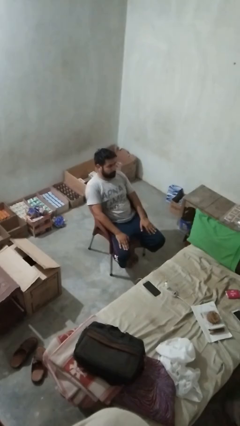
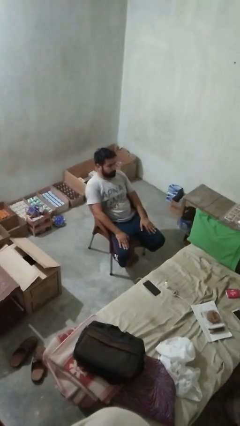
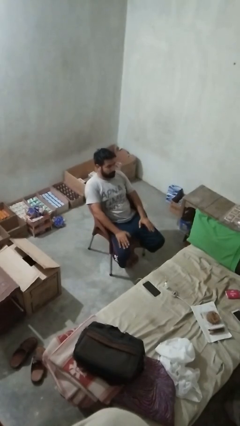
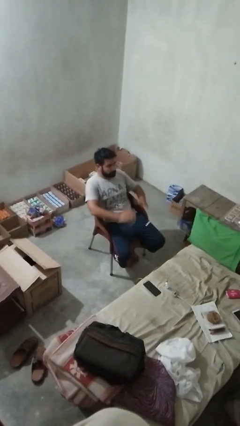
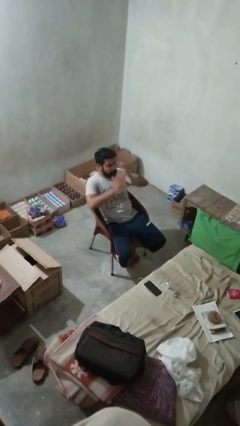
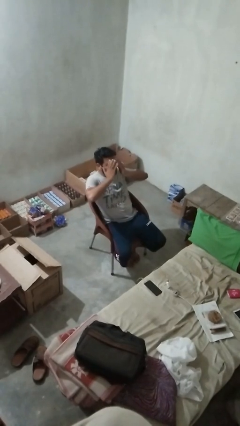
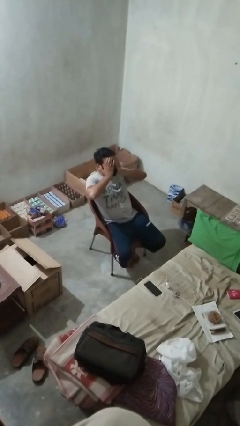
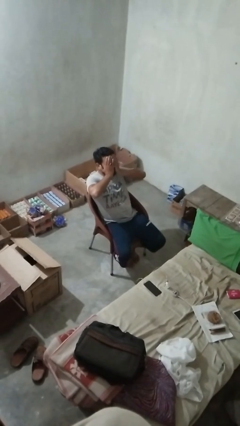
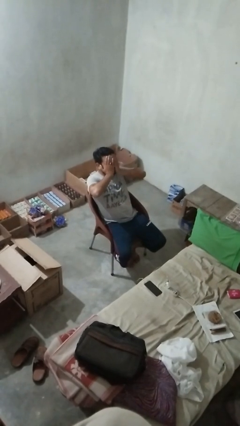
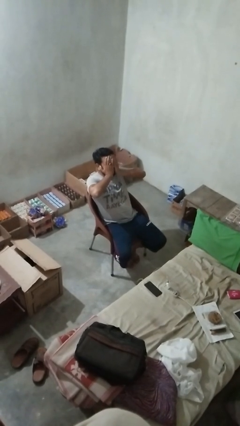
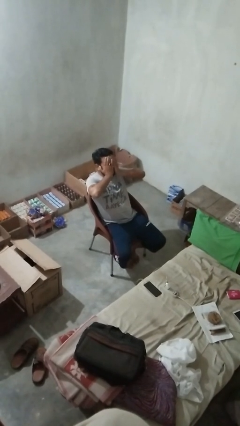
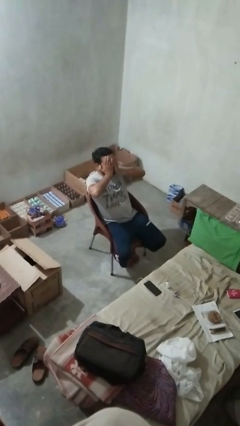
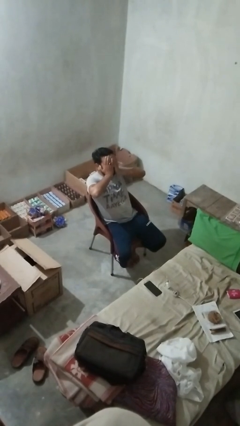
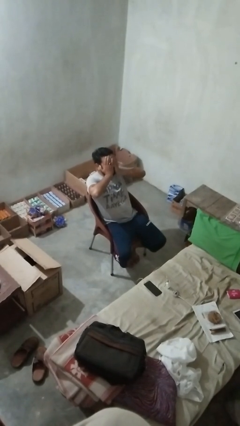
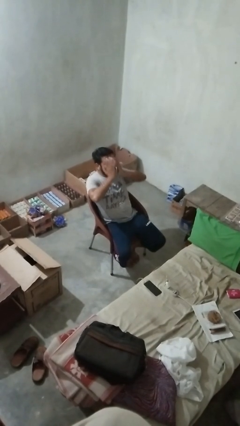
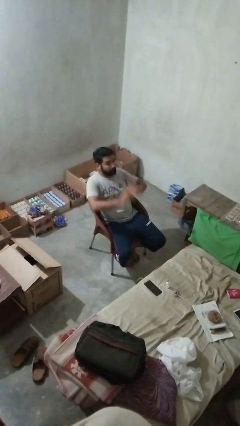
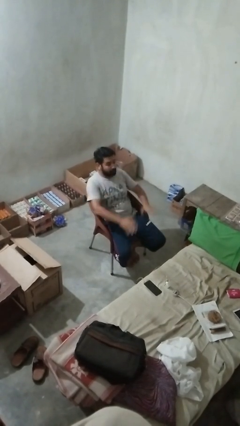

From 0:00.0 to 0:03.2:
person covers face with hands

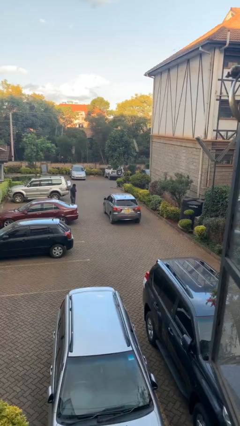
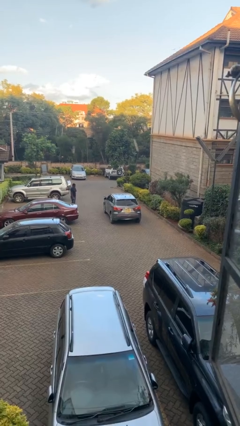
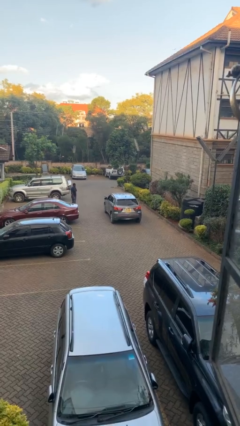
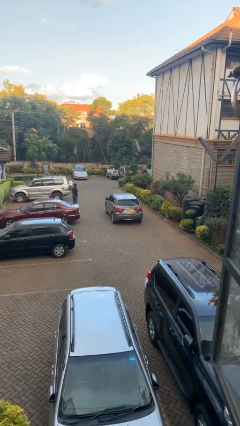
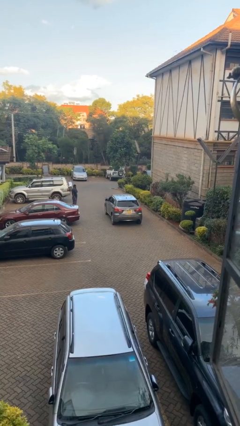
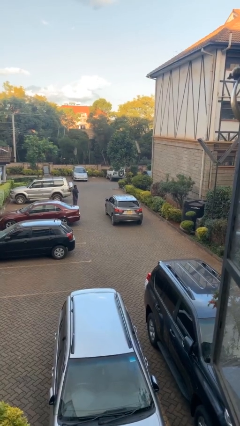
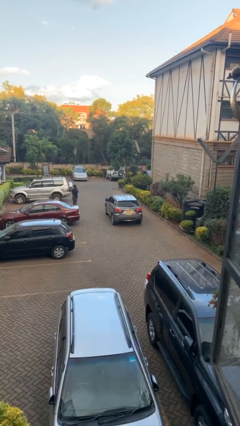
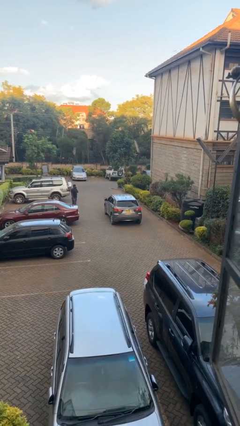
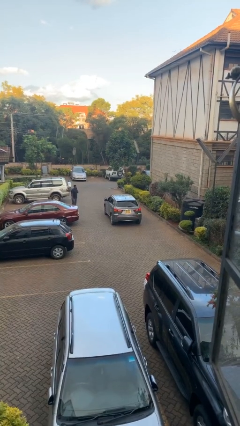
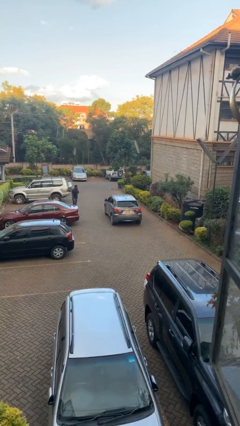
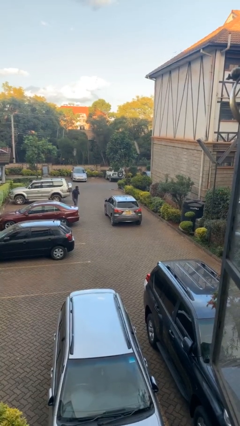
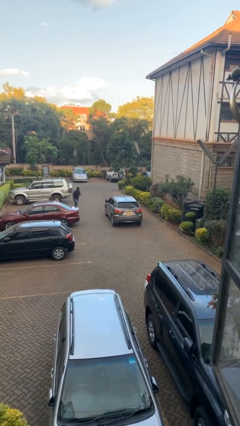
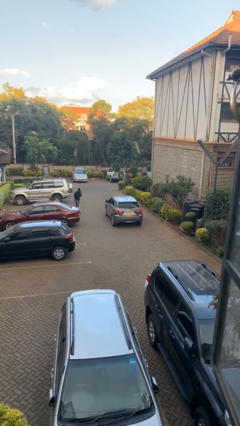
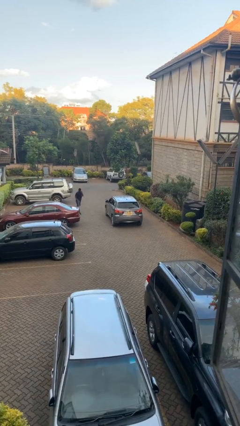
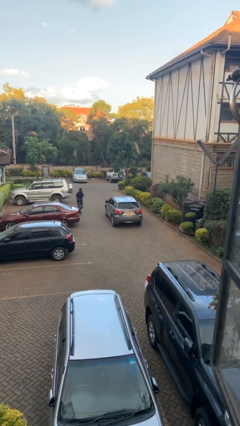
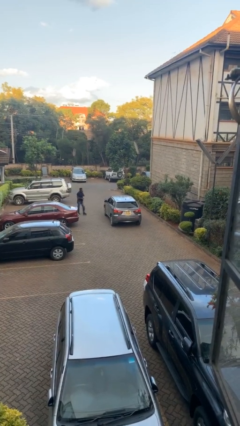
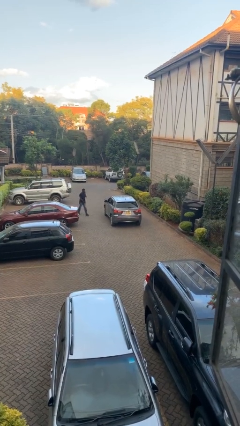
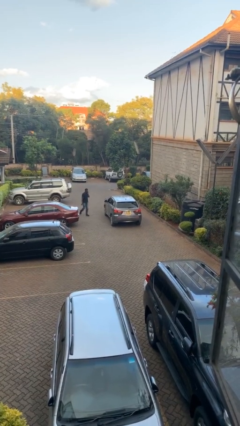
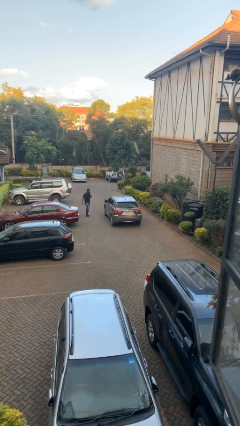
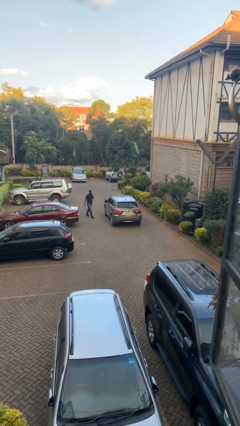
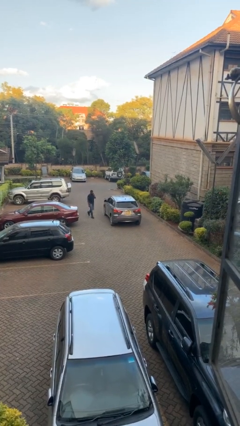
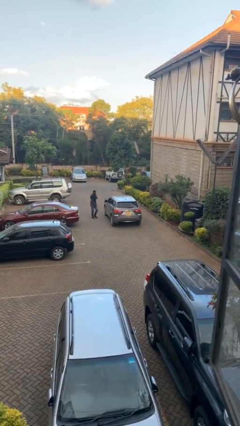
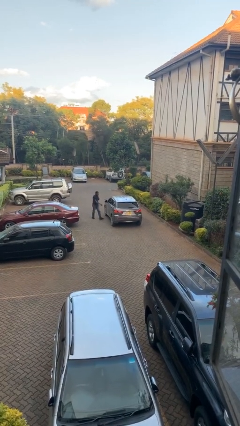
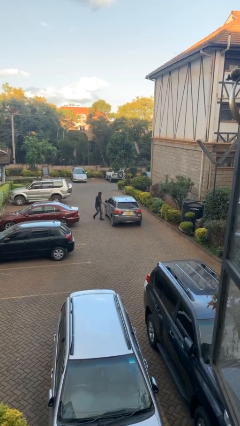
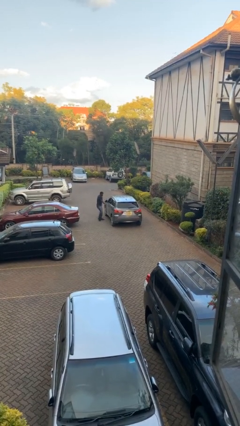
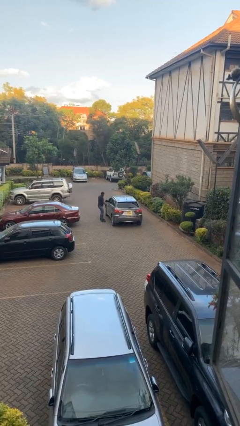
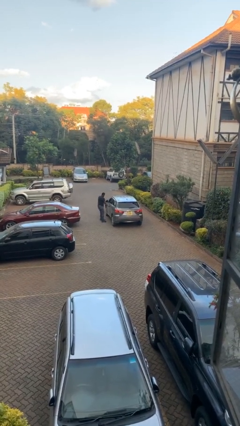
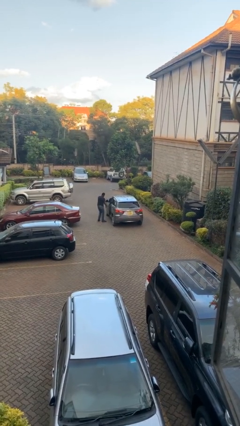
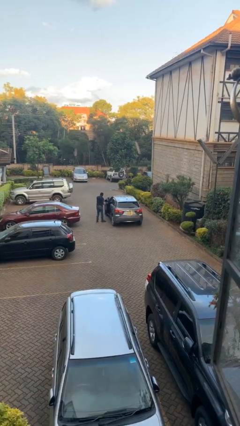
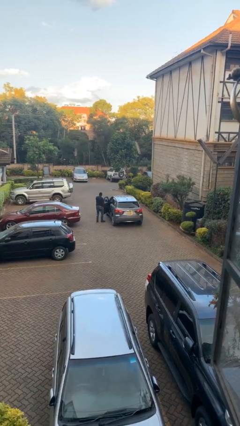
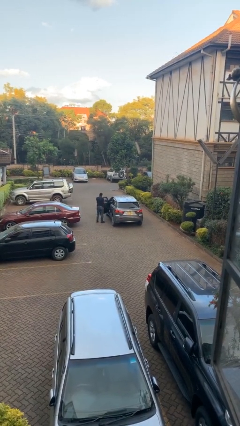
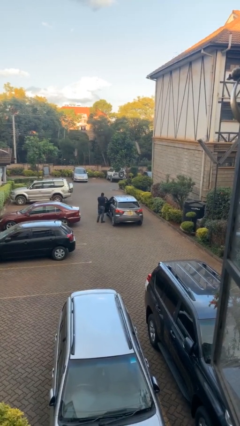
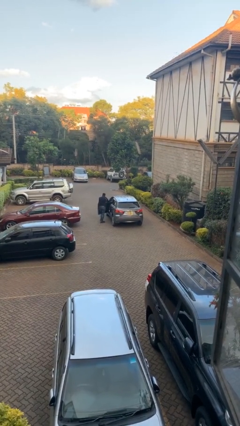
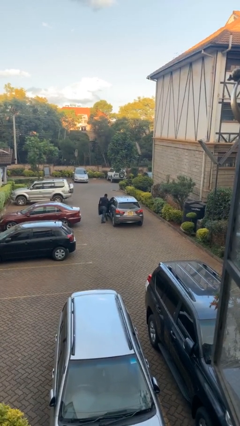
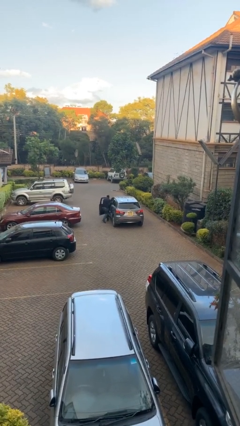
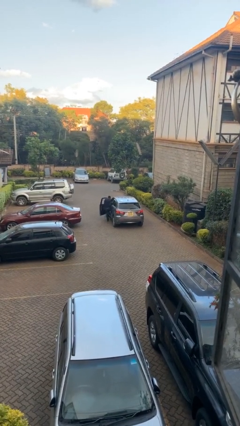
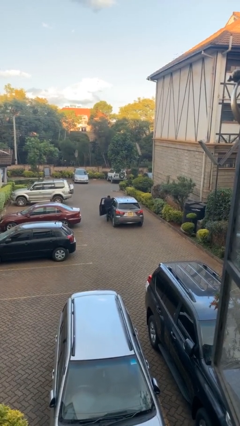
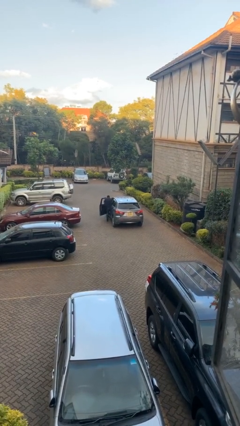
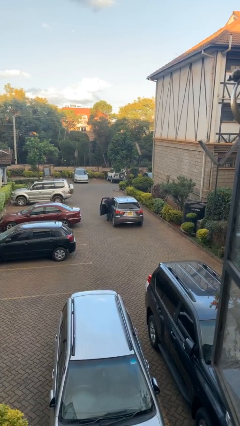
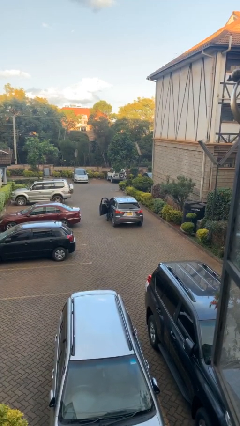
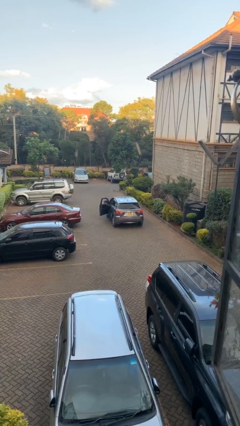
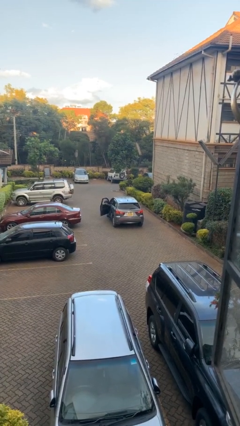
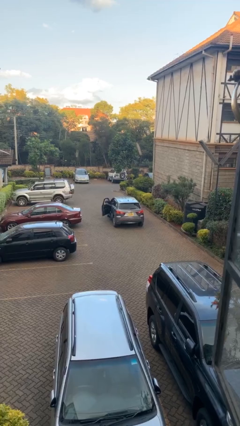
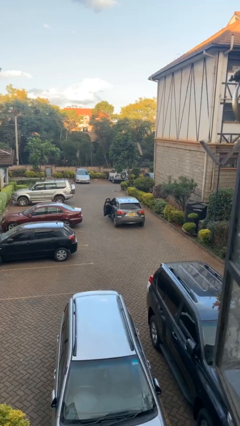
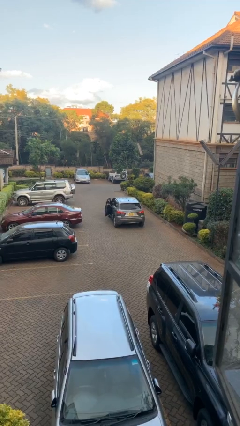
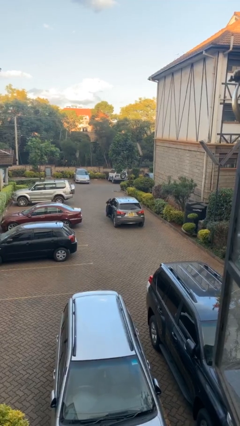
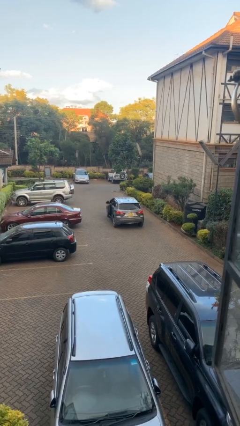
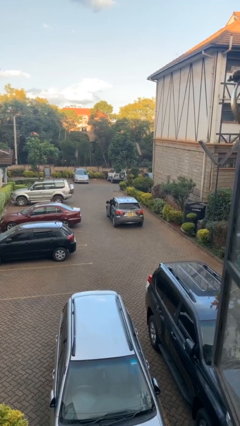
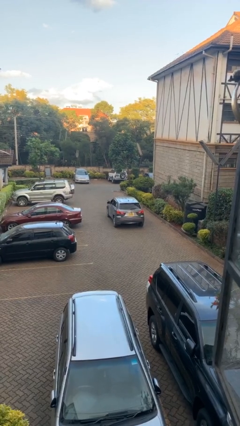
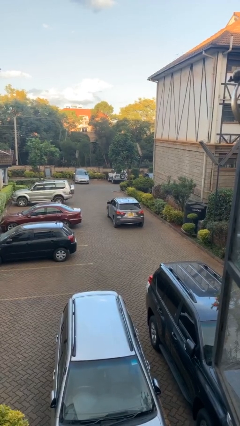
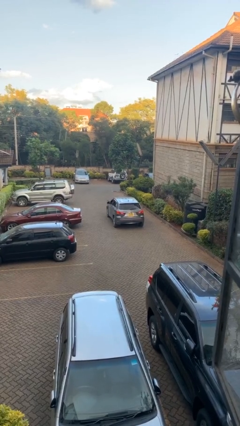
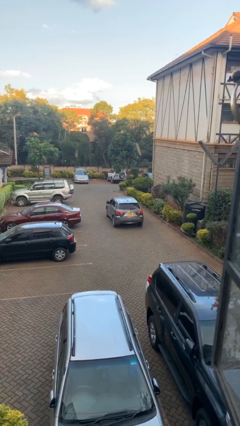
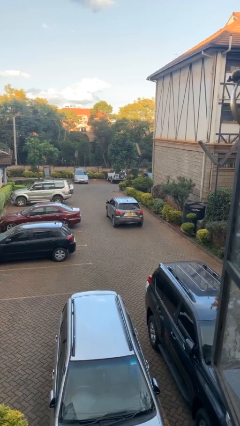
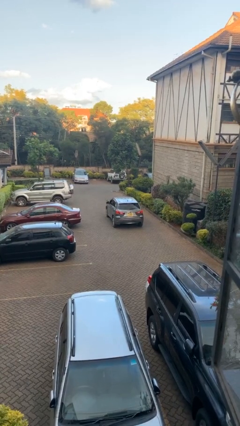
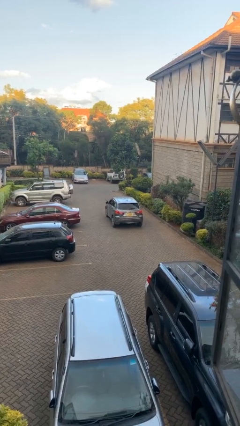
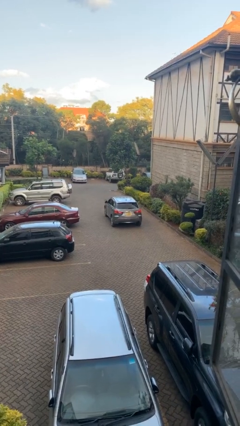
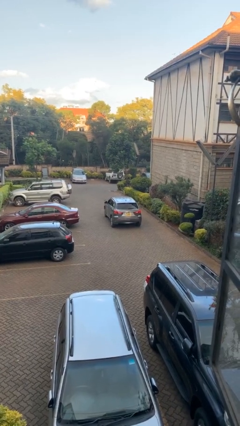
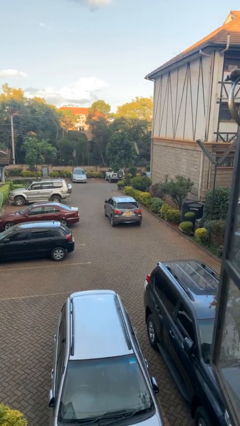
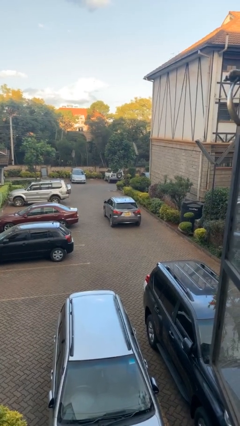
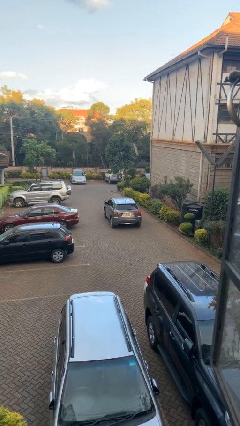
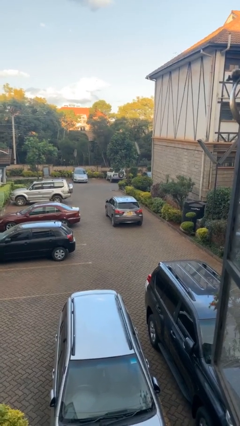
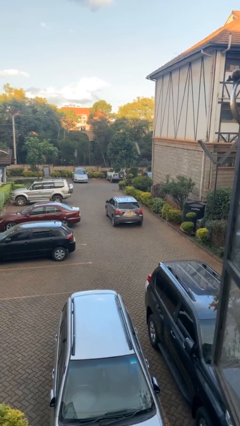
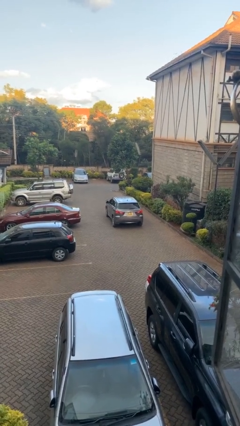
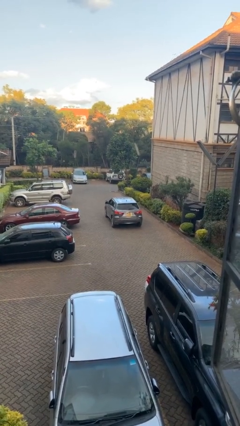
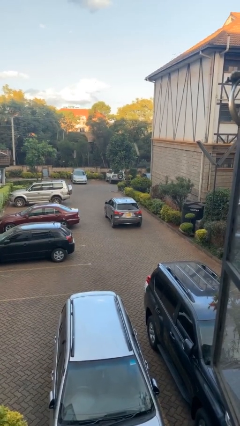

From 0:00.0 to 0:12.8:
car picks up person

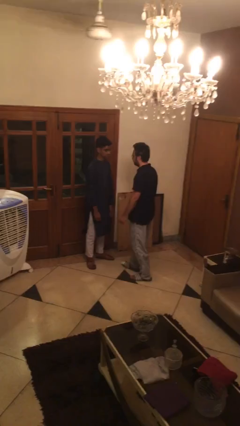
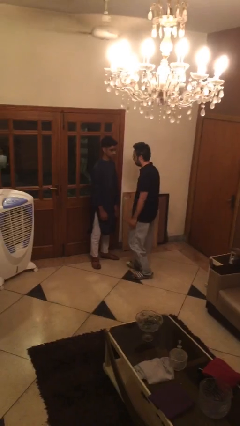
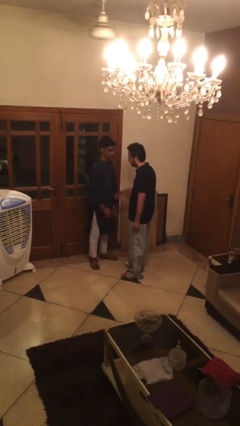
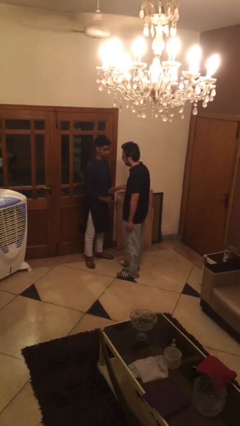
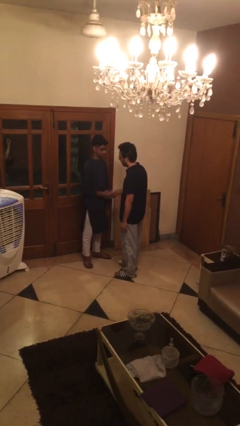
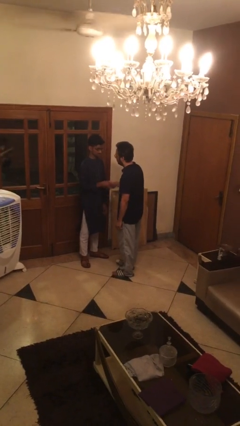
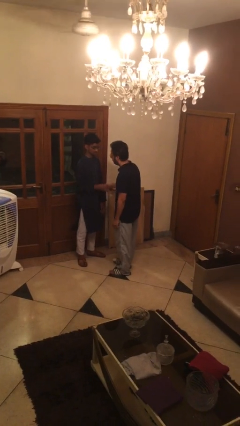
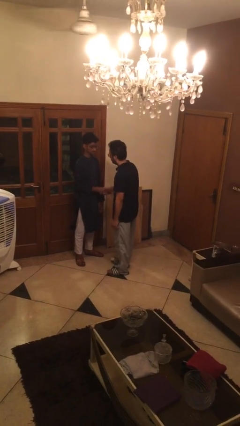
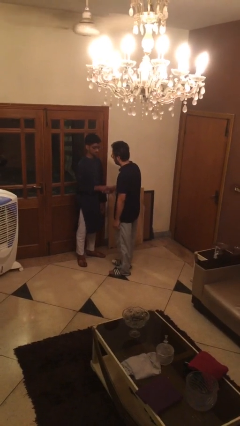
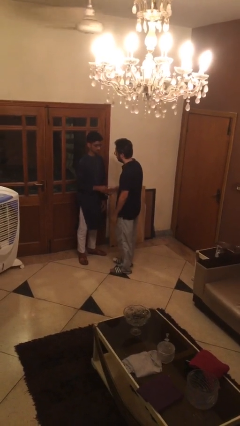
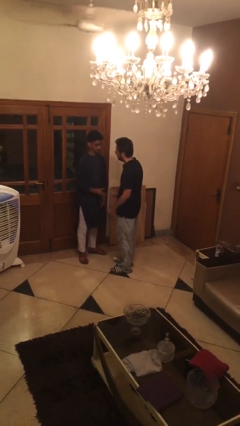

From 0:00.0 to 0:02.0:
person shakes hand
